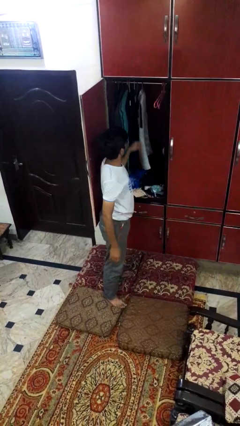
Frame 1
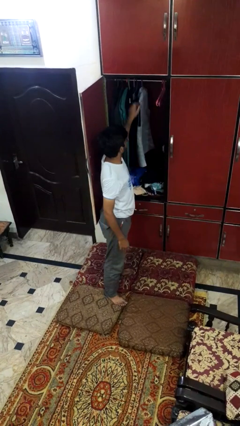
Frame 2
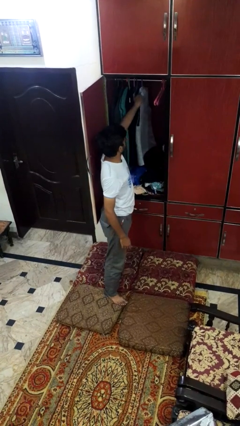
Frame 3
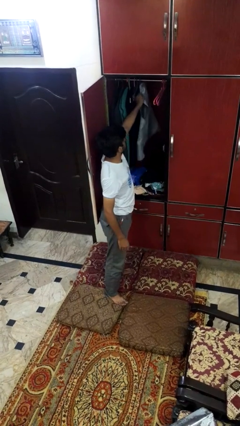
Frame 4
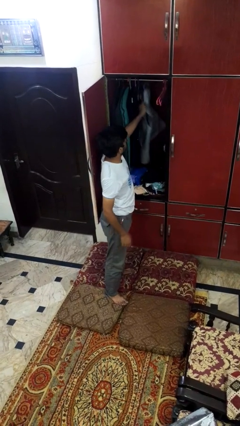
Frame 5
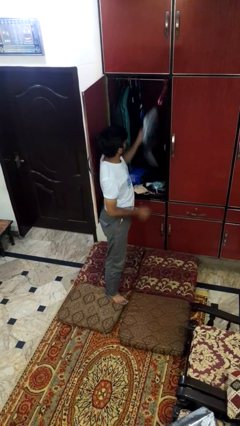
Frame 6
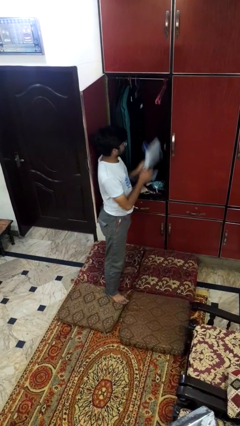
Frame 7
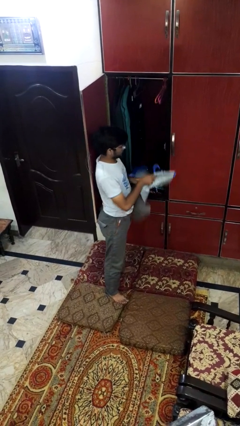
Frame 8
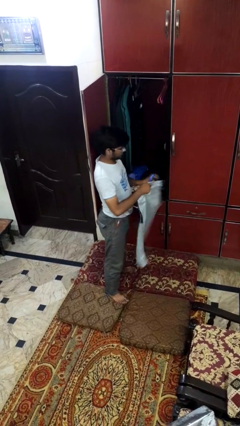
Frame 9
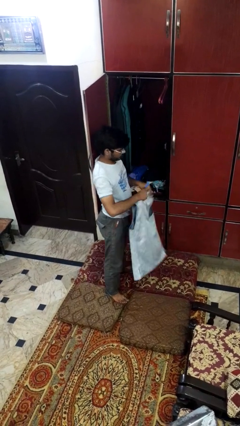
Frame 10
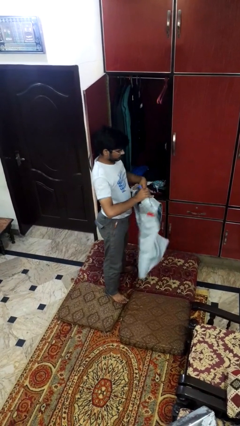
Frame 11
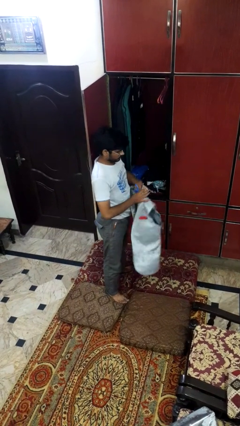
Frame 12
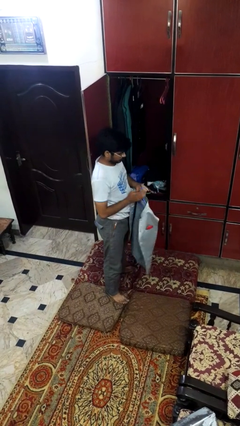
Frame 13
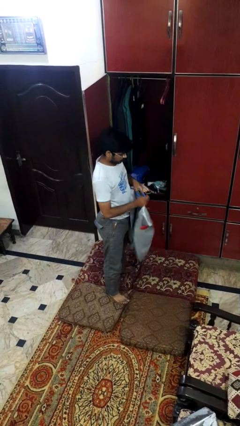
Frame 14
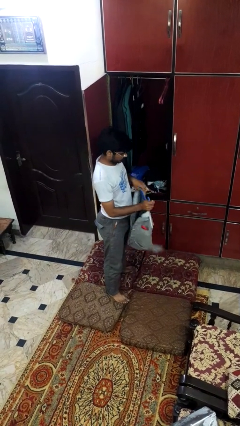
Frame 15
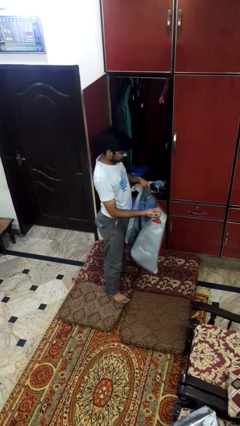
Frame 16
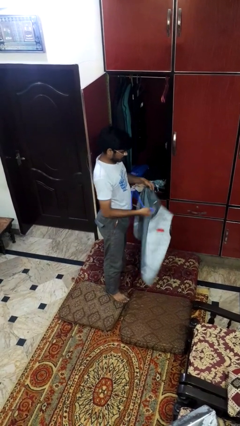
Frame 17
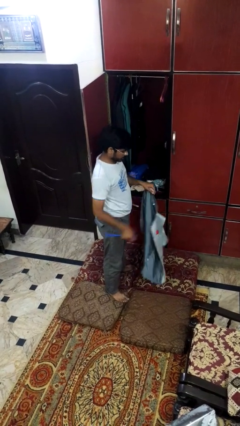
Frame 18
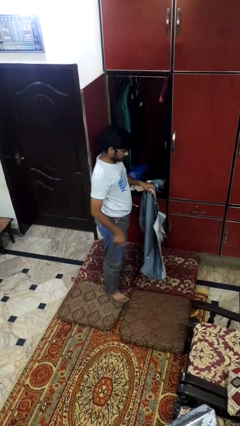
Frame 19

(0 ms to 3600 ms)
person takes clothes from closet

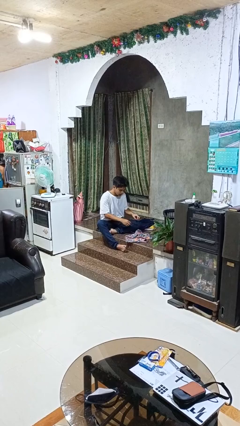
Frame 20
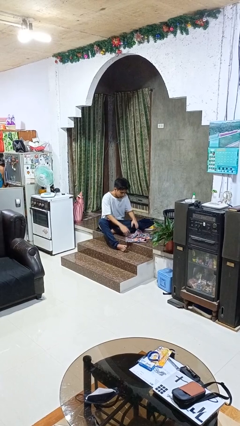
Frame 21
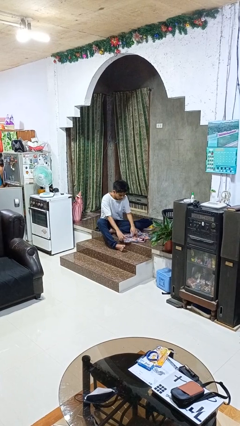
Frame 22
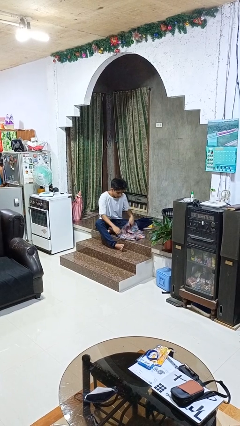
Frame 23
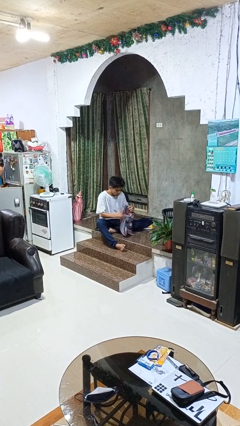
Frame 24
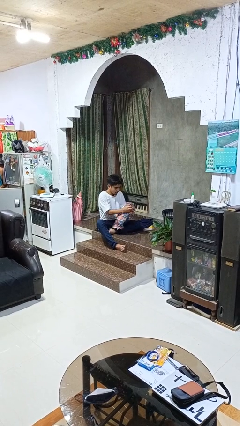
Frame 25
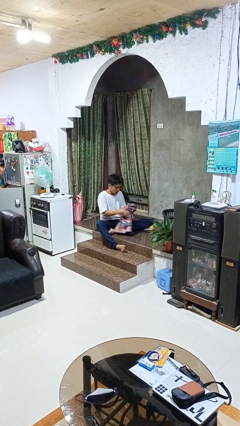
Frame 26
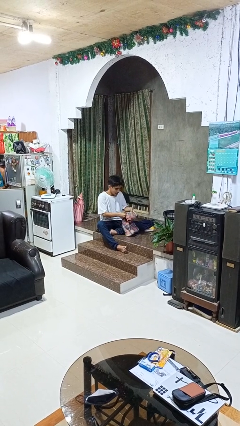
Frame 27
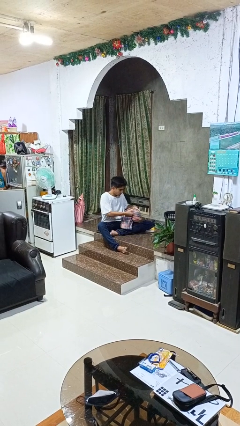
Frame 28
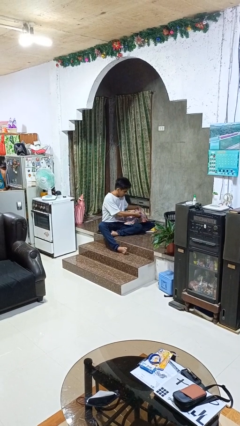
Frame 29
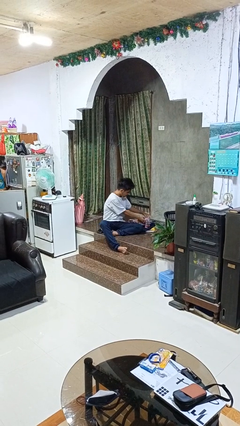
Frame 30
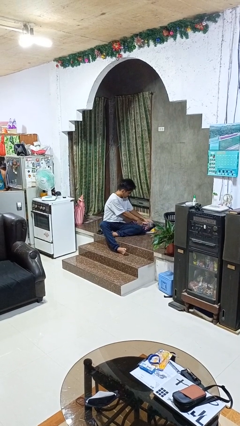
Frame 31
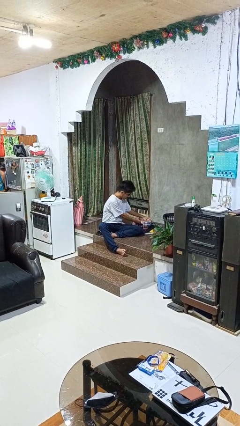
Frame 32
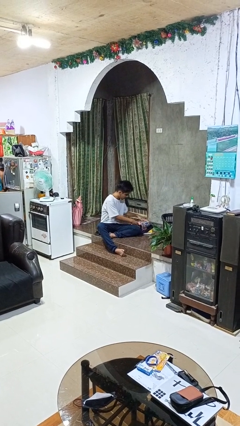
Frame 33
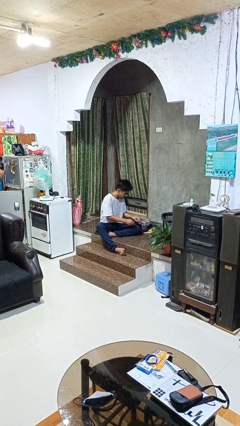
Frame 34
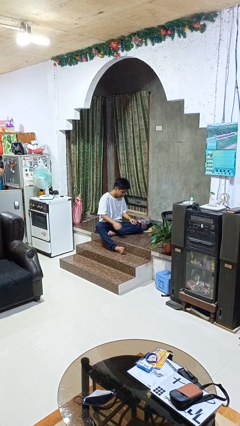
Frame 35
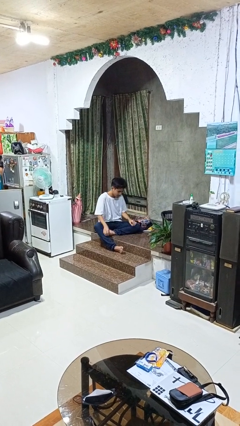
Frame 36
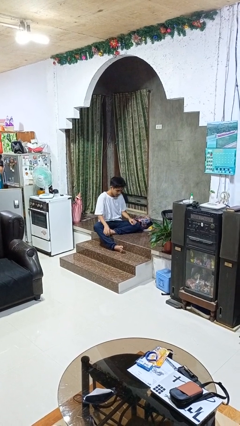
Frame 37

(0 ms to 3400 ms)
person folds shirt

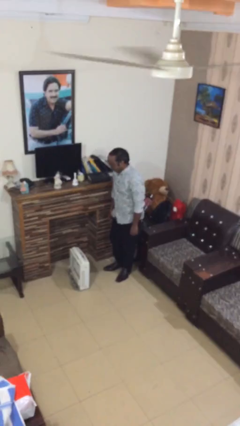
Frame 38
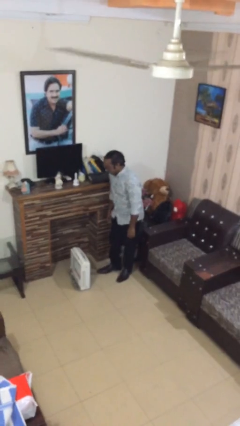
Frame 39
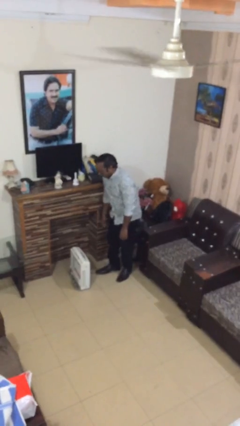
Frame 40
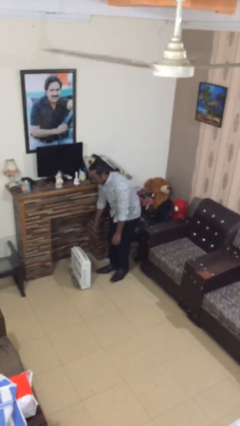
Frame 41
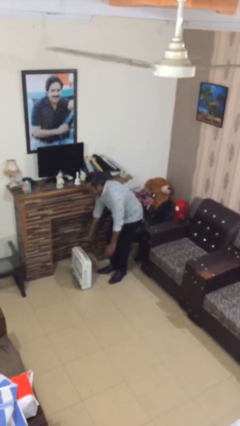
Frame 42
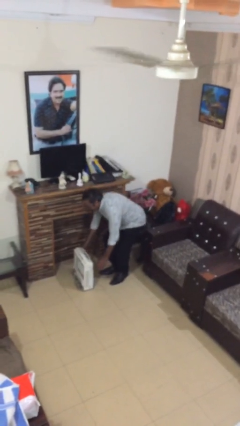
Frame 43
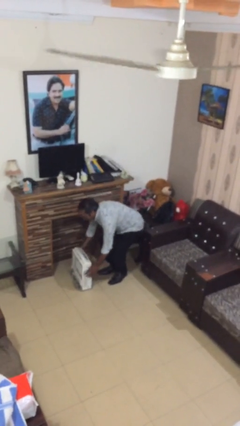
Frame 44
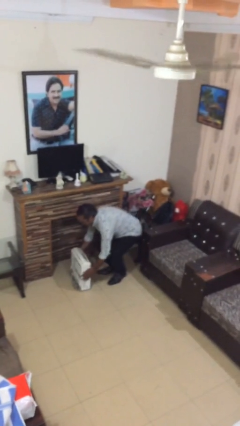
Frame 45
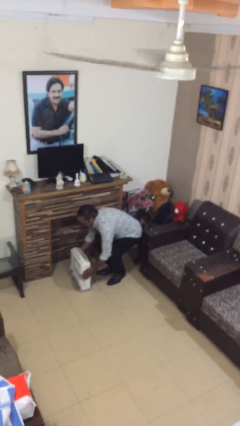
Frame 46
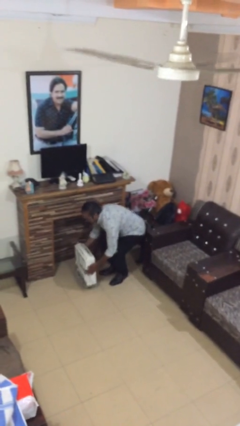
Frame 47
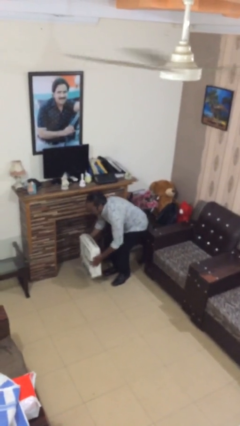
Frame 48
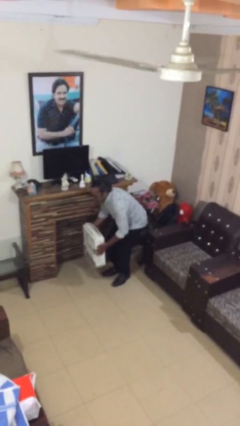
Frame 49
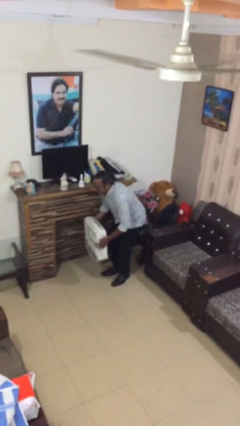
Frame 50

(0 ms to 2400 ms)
person picks up object from floor

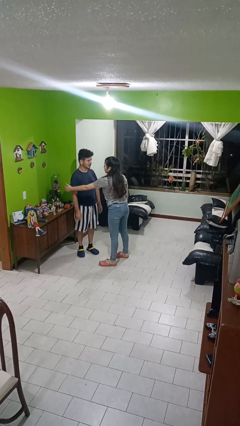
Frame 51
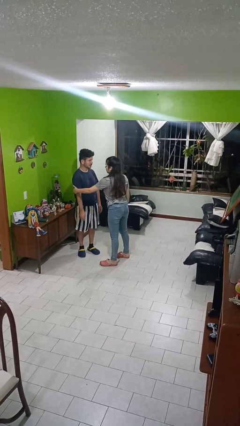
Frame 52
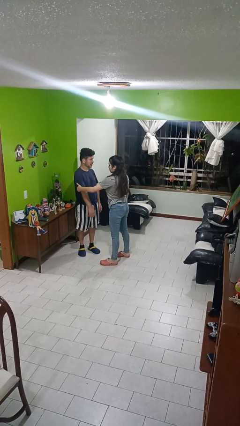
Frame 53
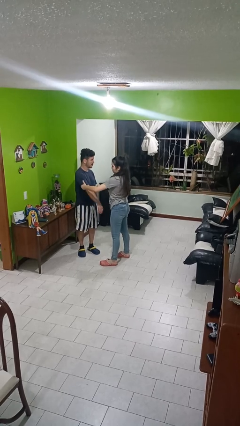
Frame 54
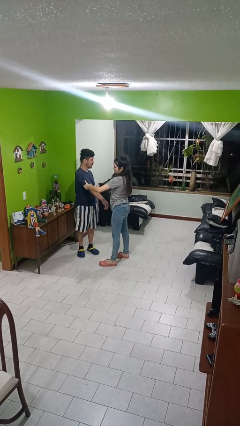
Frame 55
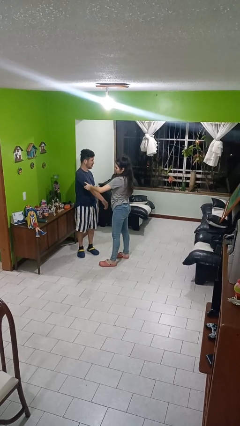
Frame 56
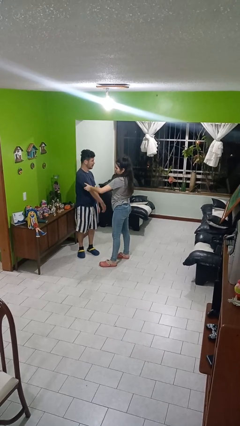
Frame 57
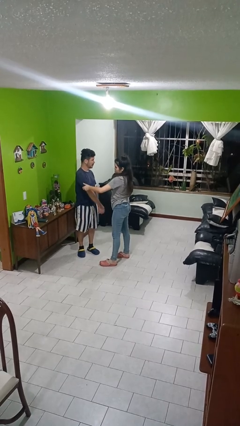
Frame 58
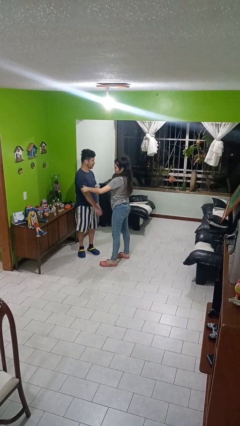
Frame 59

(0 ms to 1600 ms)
person grabs person by bicep

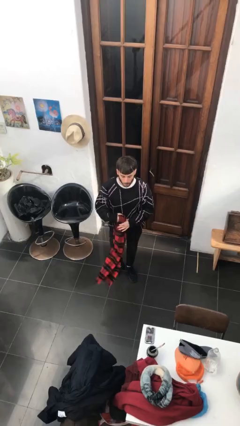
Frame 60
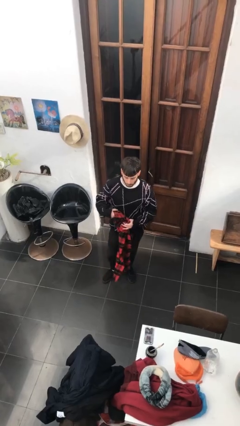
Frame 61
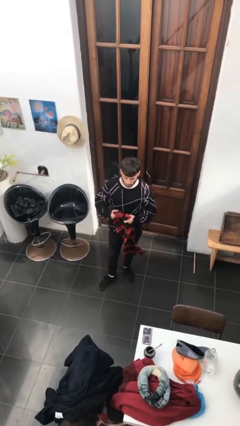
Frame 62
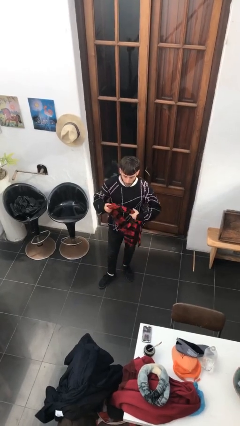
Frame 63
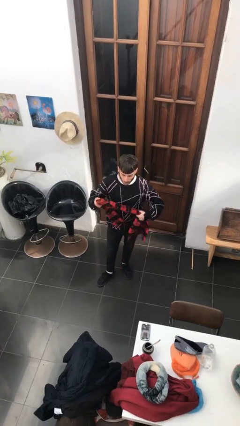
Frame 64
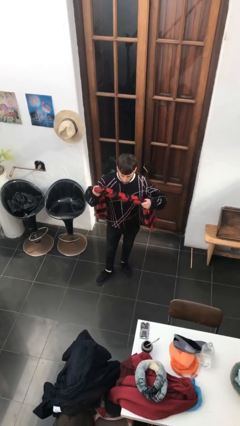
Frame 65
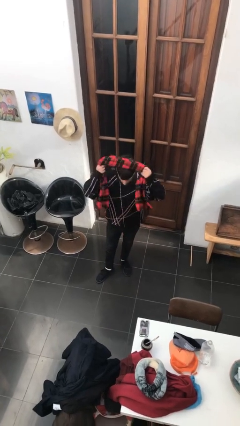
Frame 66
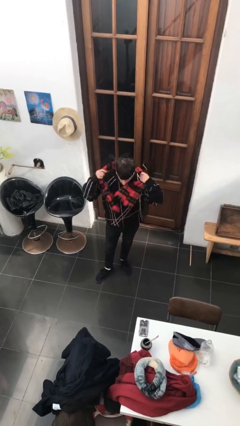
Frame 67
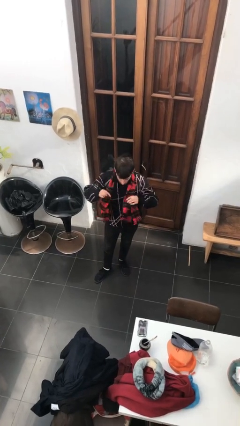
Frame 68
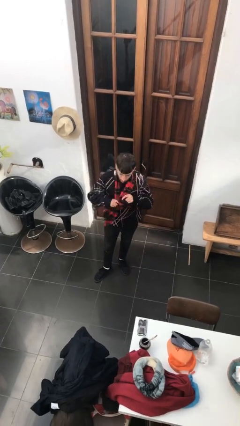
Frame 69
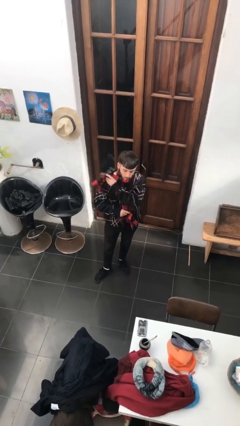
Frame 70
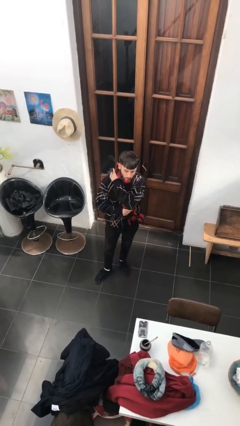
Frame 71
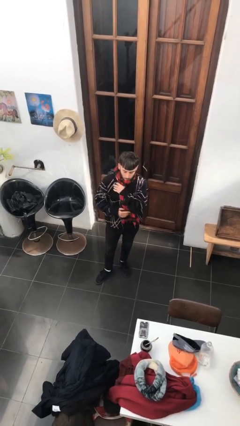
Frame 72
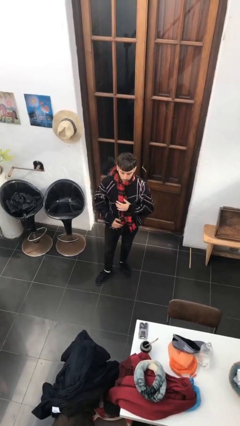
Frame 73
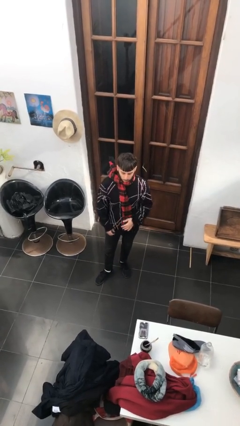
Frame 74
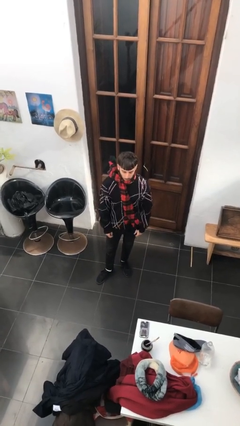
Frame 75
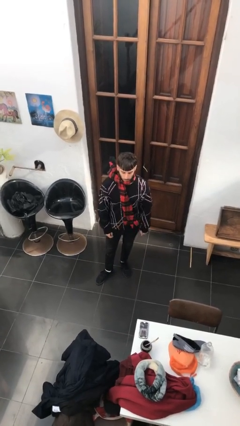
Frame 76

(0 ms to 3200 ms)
person puts on scarf

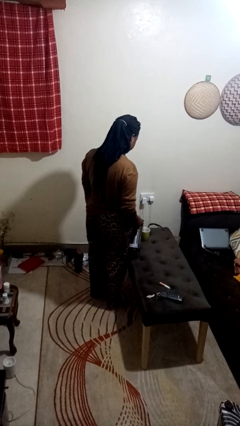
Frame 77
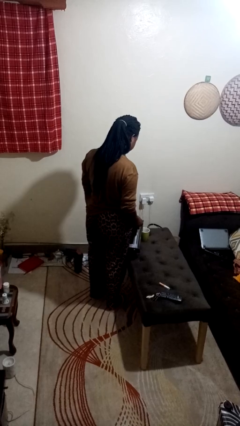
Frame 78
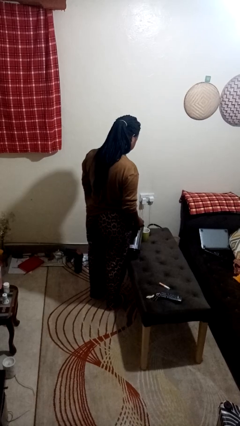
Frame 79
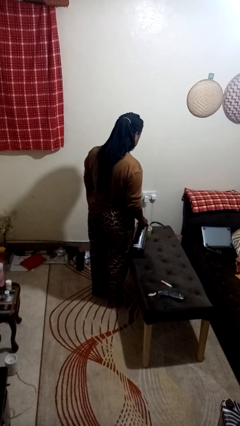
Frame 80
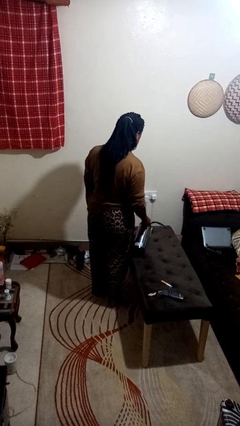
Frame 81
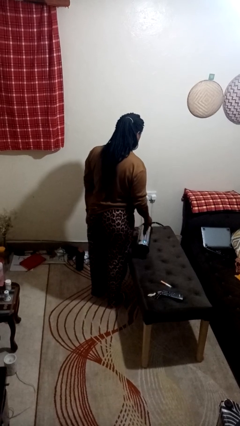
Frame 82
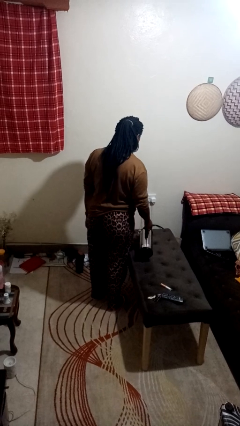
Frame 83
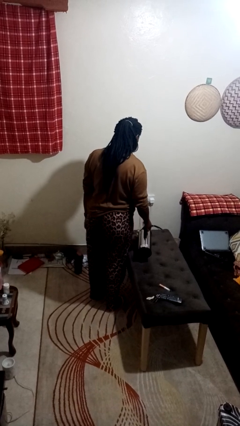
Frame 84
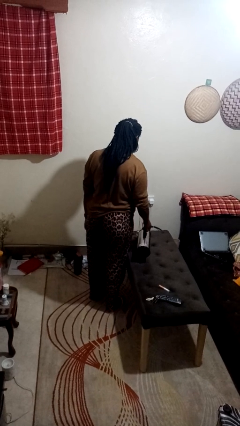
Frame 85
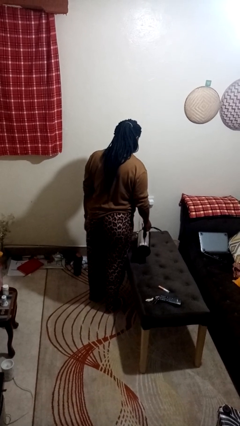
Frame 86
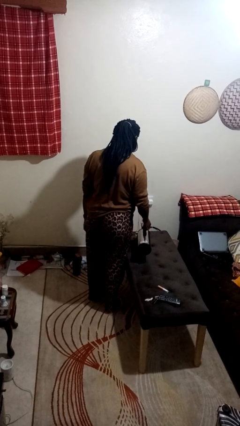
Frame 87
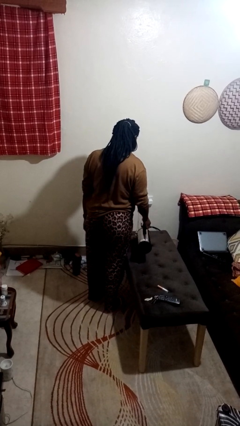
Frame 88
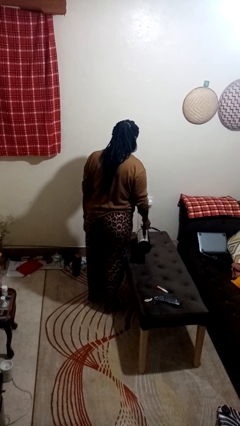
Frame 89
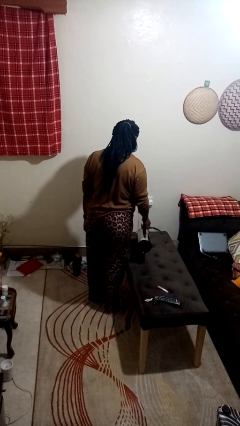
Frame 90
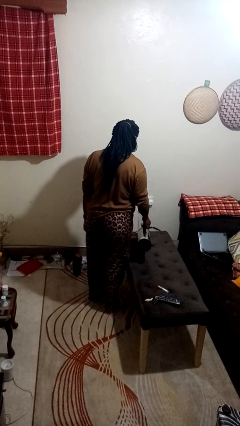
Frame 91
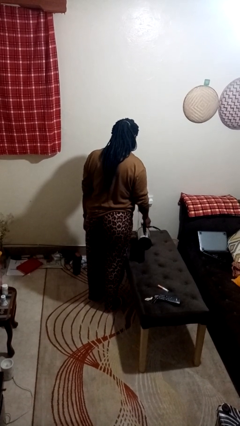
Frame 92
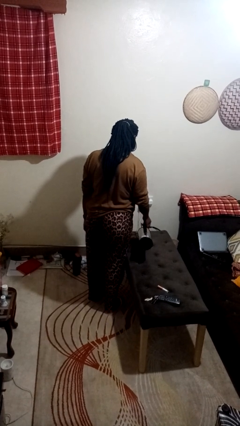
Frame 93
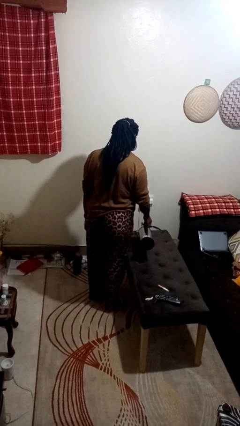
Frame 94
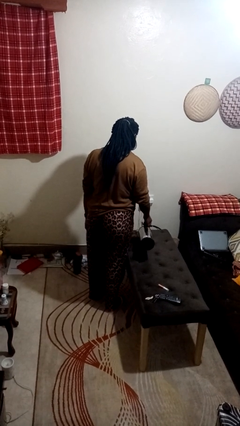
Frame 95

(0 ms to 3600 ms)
person pours coffee into mug
